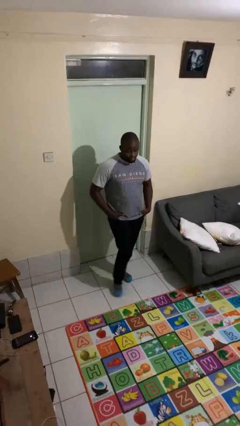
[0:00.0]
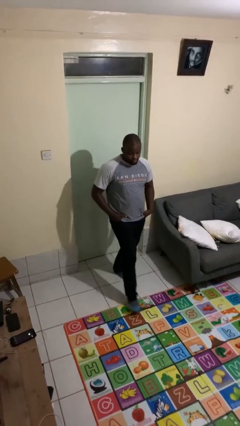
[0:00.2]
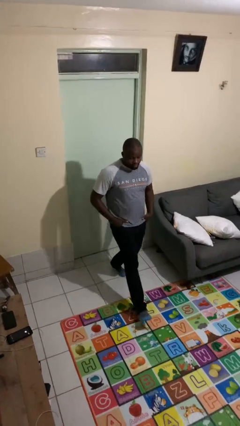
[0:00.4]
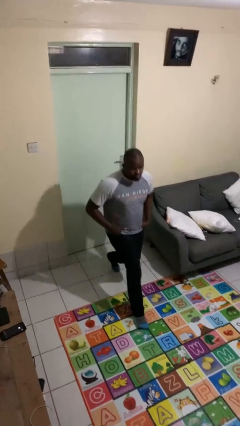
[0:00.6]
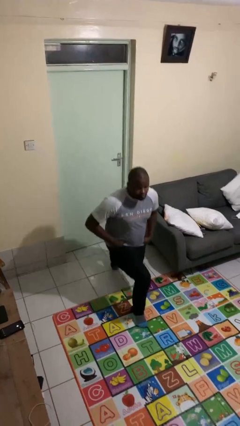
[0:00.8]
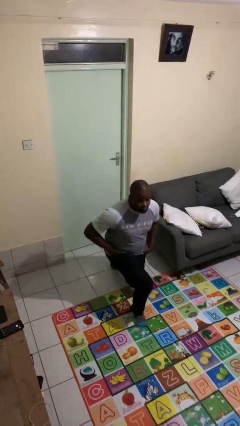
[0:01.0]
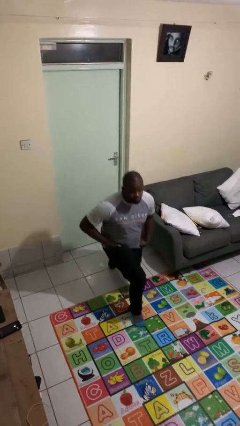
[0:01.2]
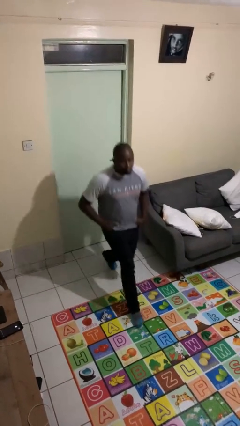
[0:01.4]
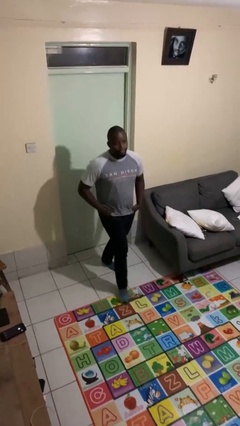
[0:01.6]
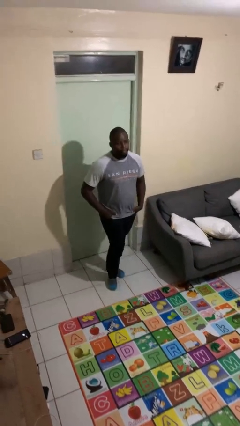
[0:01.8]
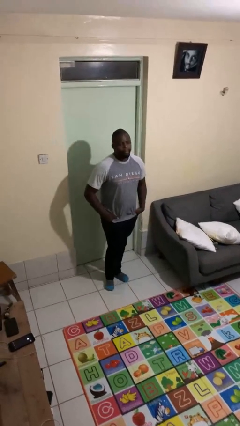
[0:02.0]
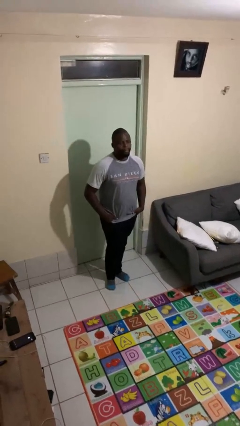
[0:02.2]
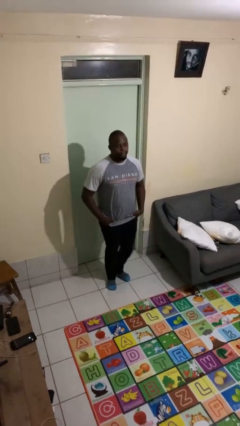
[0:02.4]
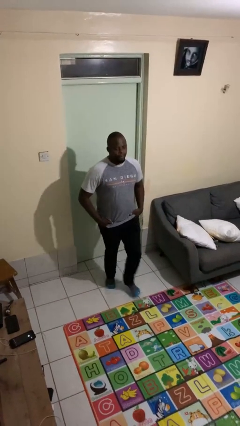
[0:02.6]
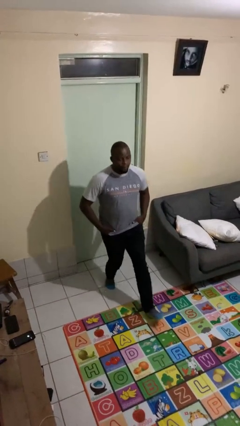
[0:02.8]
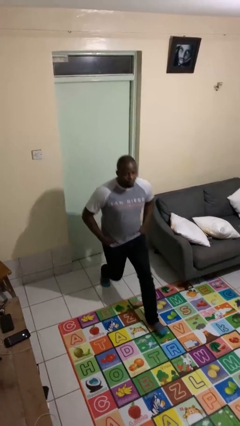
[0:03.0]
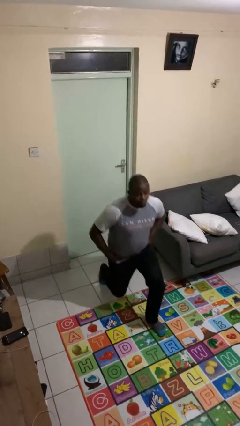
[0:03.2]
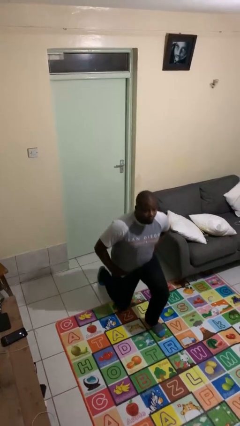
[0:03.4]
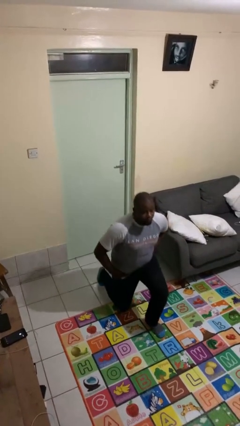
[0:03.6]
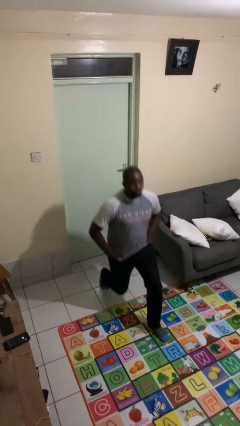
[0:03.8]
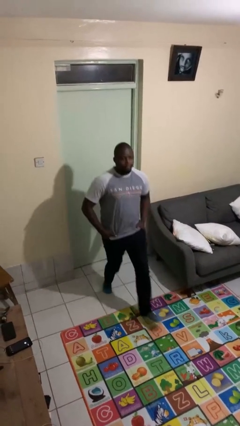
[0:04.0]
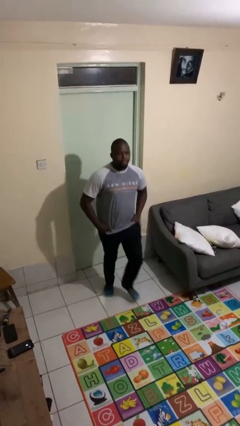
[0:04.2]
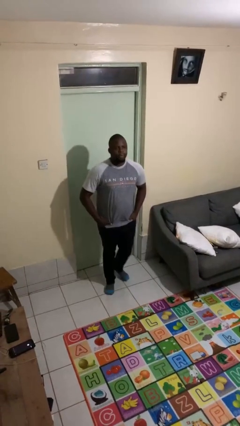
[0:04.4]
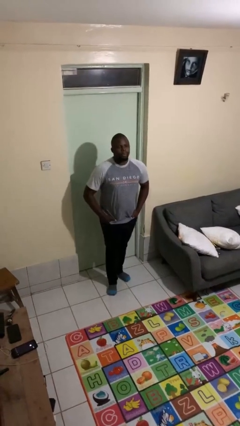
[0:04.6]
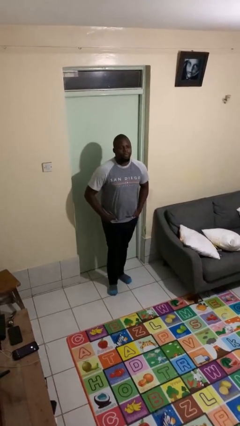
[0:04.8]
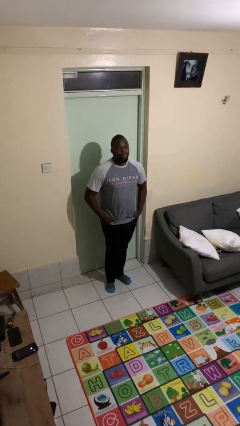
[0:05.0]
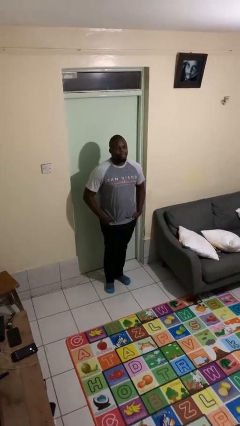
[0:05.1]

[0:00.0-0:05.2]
person exercises with lunges

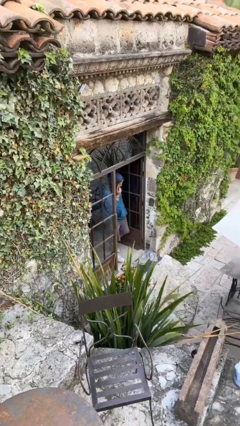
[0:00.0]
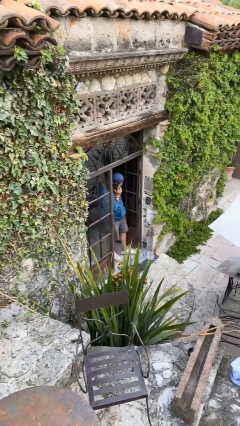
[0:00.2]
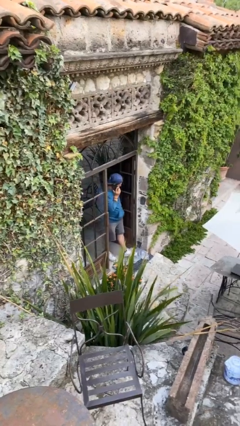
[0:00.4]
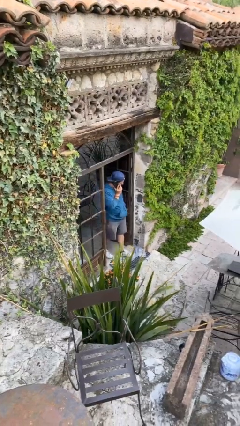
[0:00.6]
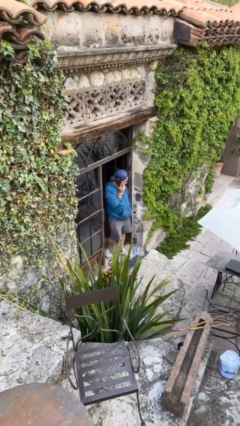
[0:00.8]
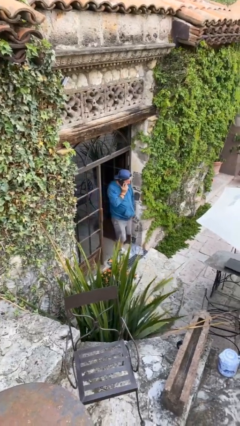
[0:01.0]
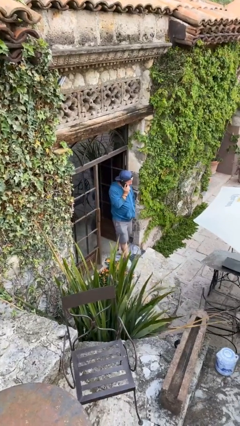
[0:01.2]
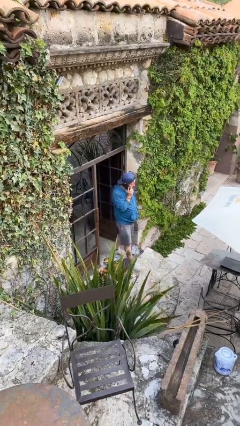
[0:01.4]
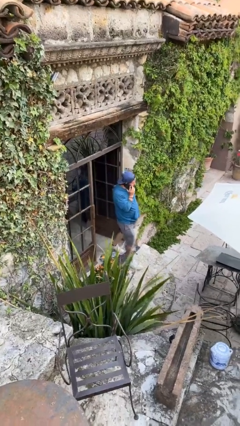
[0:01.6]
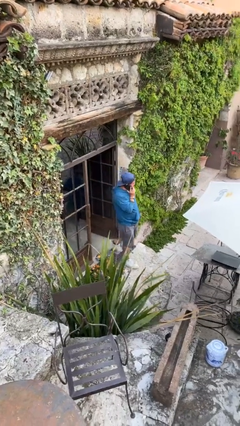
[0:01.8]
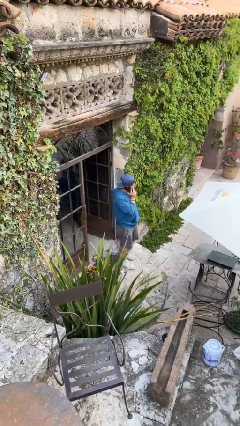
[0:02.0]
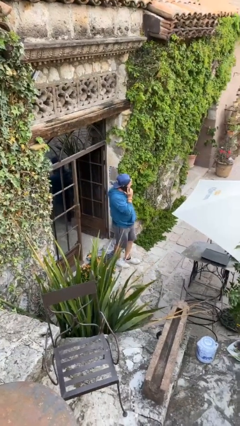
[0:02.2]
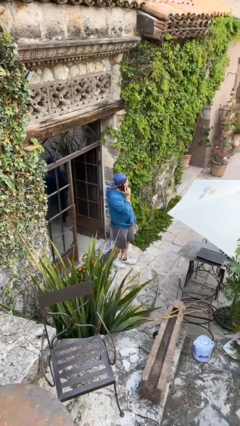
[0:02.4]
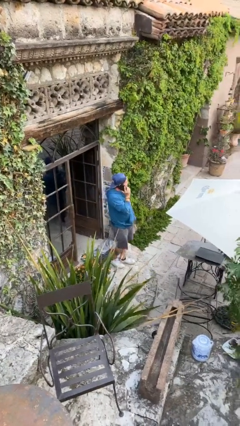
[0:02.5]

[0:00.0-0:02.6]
person enters scene through structure

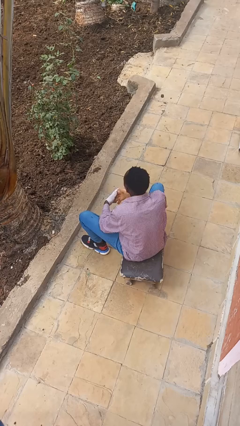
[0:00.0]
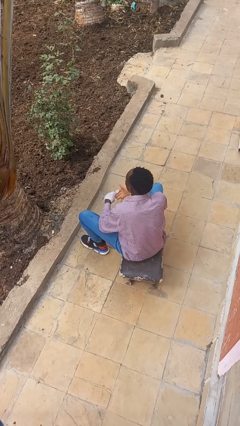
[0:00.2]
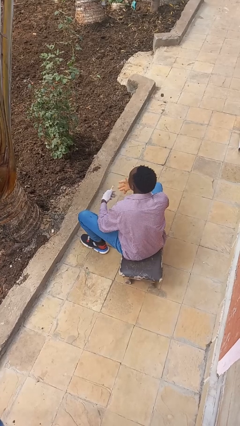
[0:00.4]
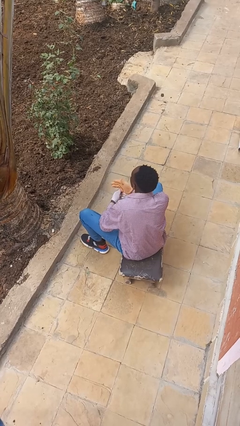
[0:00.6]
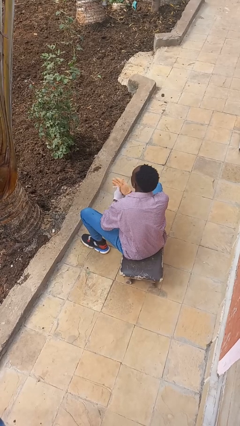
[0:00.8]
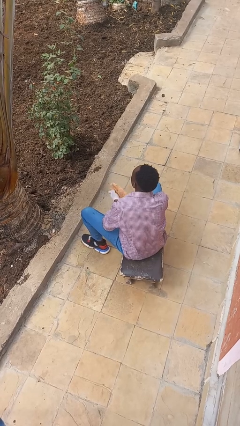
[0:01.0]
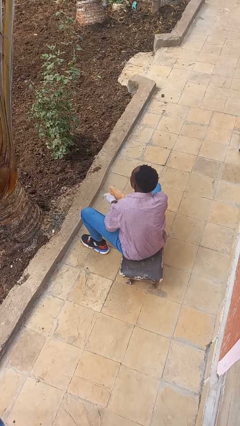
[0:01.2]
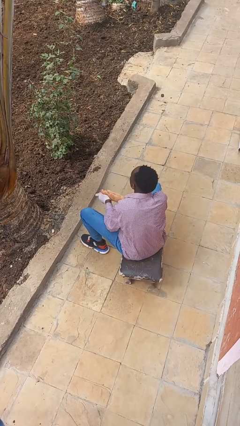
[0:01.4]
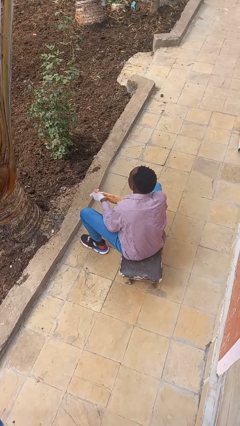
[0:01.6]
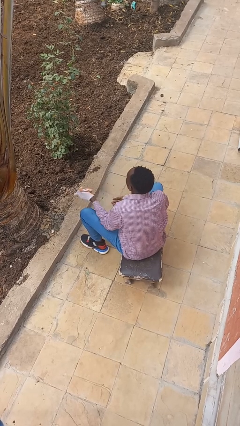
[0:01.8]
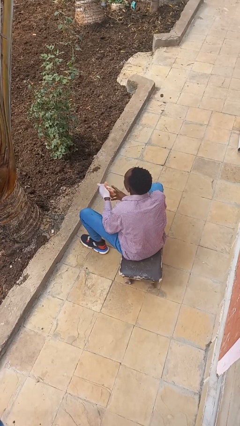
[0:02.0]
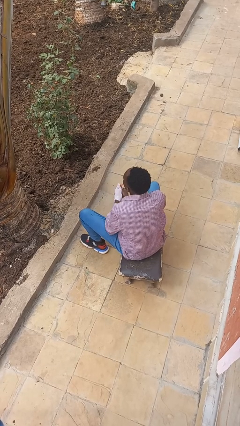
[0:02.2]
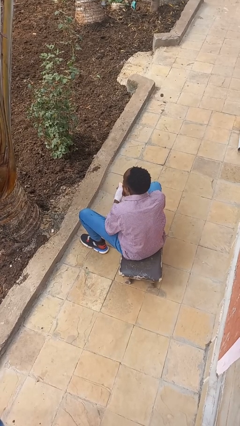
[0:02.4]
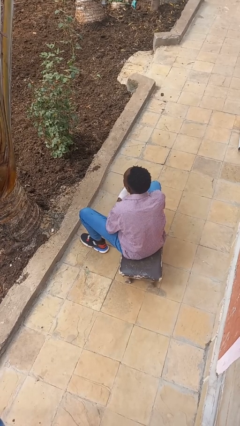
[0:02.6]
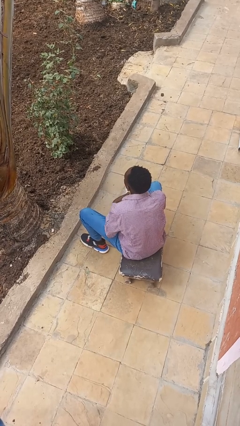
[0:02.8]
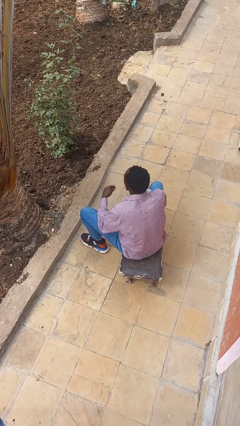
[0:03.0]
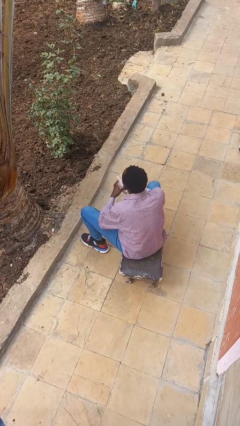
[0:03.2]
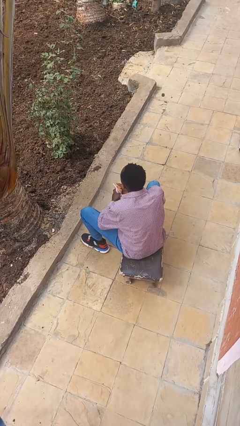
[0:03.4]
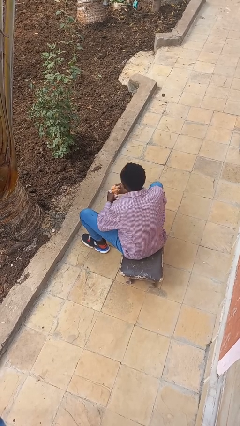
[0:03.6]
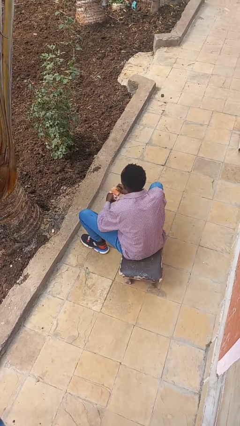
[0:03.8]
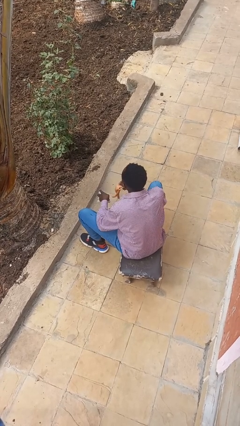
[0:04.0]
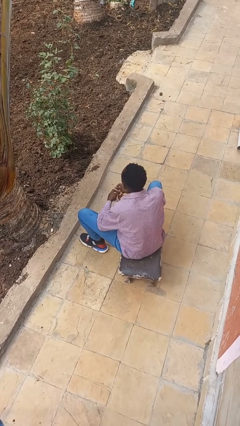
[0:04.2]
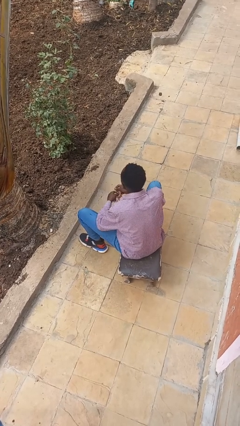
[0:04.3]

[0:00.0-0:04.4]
person takes off gloves

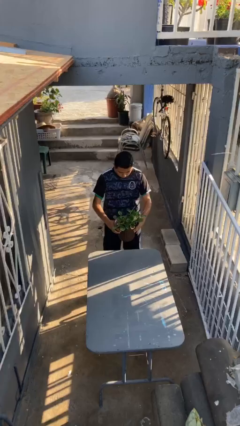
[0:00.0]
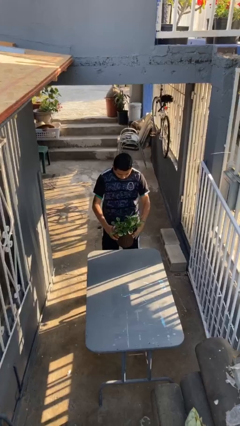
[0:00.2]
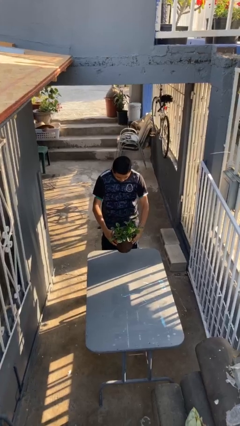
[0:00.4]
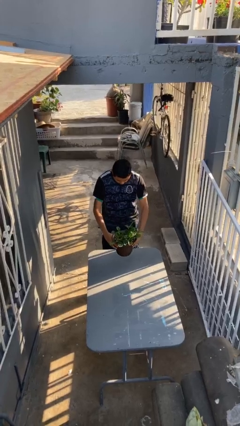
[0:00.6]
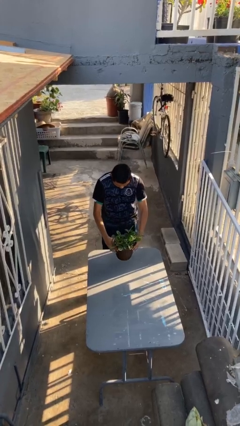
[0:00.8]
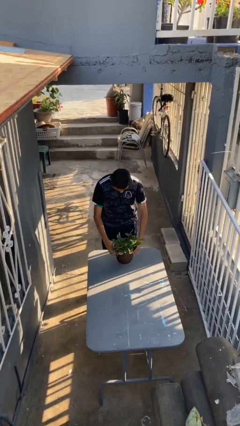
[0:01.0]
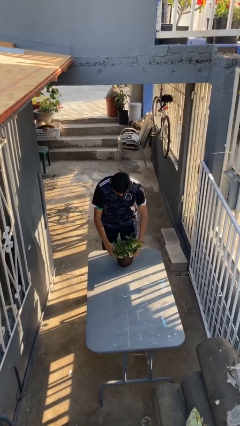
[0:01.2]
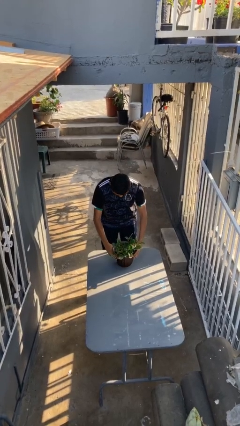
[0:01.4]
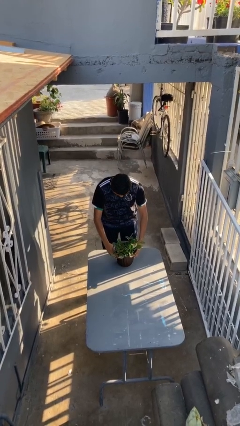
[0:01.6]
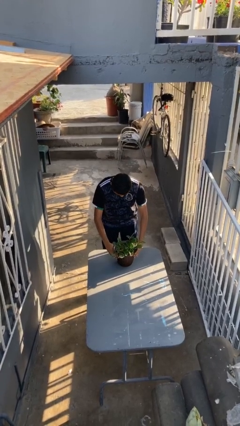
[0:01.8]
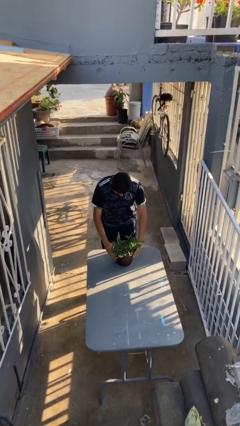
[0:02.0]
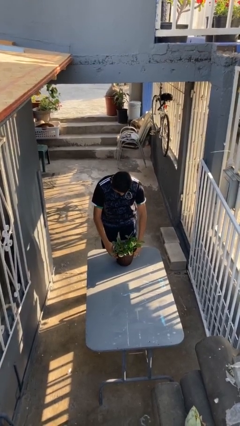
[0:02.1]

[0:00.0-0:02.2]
person puts down object on table

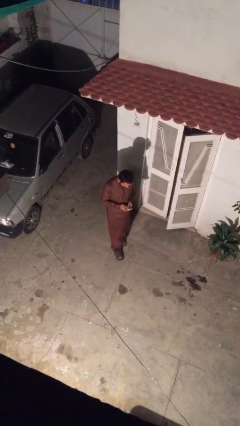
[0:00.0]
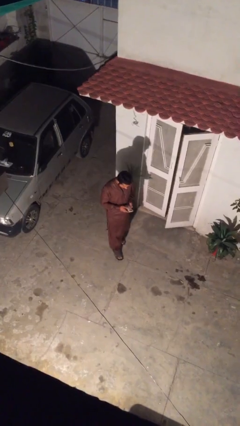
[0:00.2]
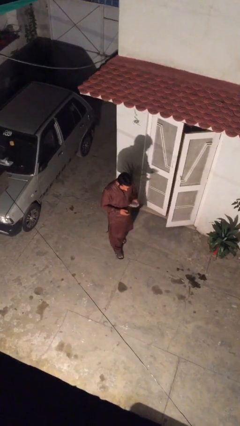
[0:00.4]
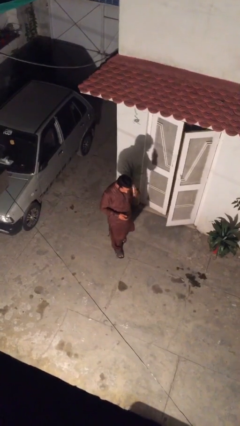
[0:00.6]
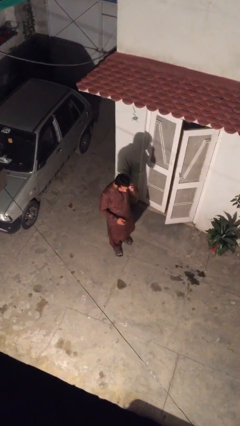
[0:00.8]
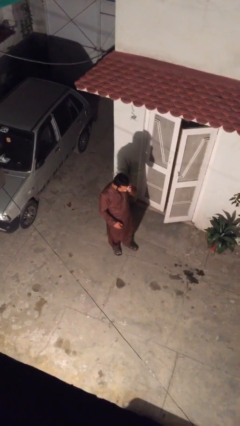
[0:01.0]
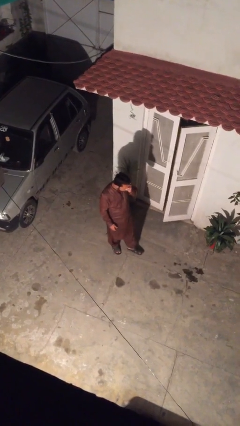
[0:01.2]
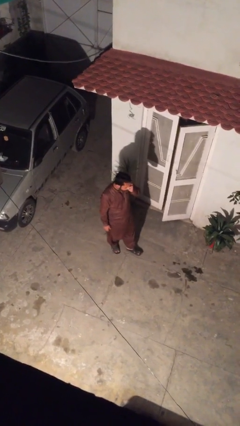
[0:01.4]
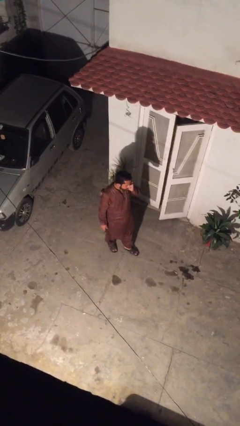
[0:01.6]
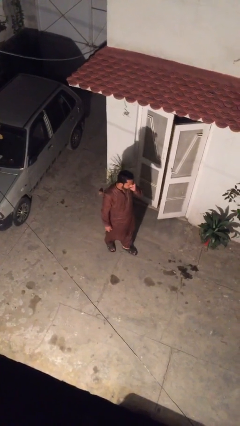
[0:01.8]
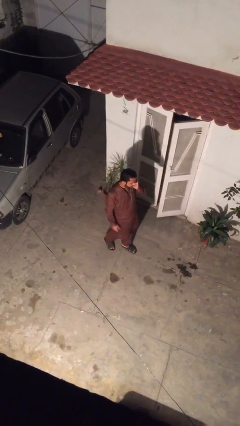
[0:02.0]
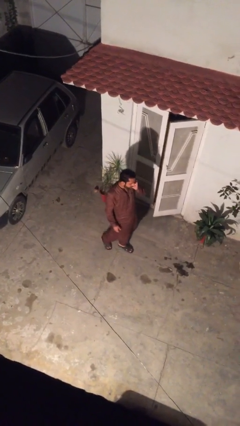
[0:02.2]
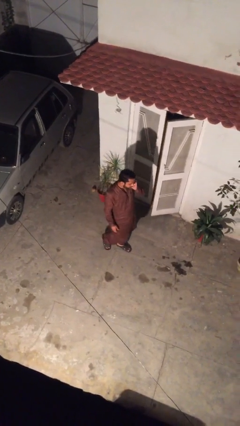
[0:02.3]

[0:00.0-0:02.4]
person talks on phone

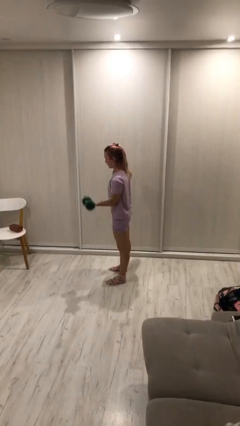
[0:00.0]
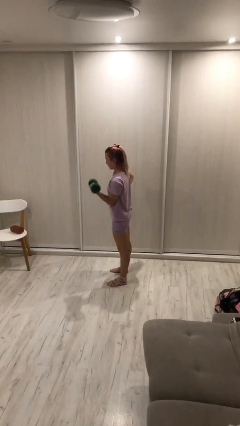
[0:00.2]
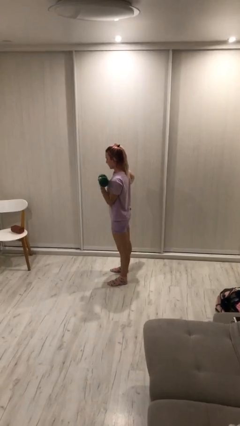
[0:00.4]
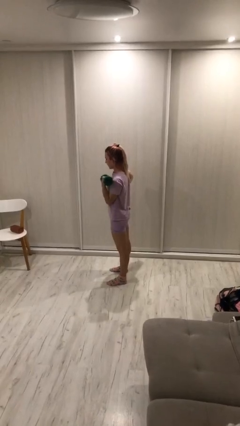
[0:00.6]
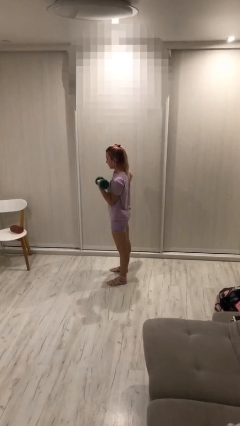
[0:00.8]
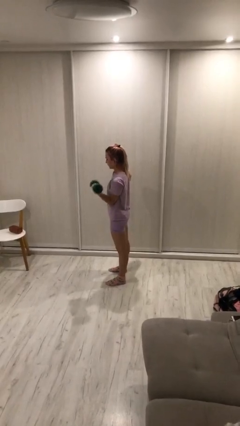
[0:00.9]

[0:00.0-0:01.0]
person lifts dumbbells
